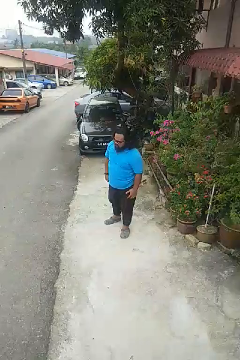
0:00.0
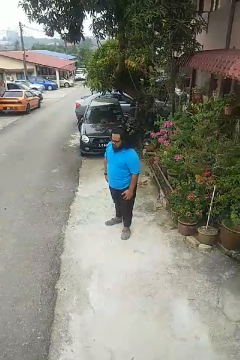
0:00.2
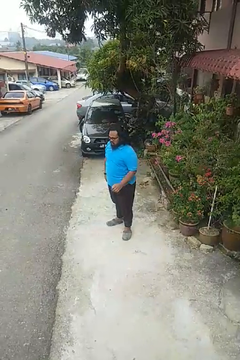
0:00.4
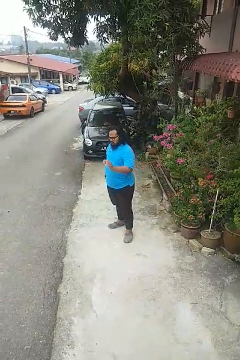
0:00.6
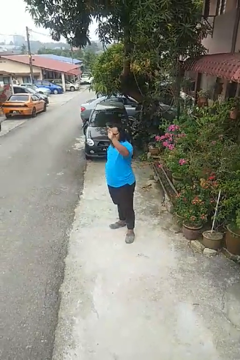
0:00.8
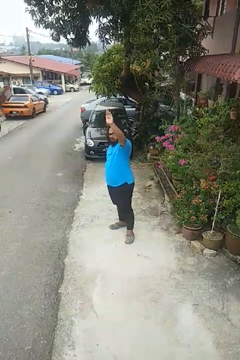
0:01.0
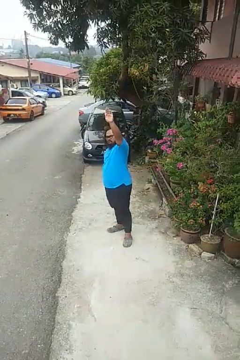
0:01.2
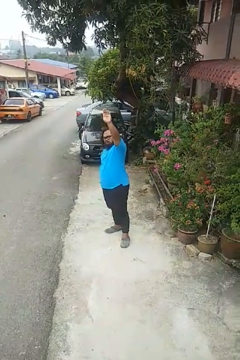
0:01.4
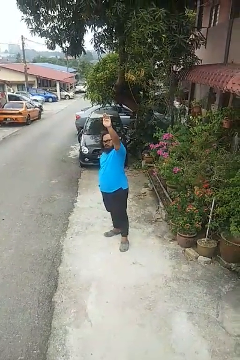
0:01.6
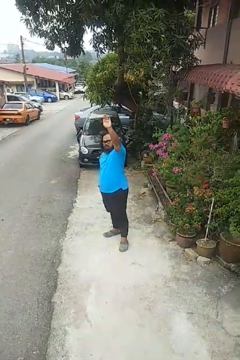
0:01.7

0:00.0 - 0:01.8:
person gestures raise hand

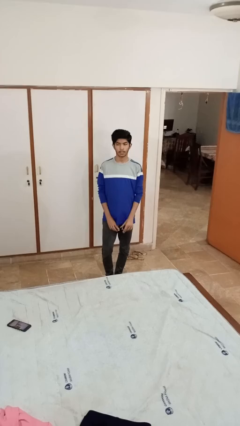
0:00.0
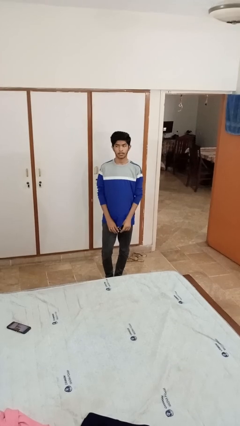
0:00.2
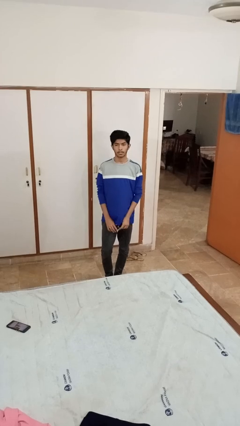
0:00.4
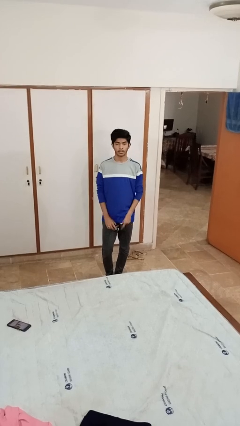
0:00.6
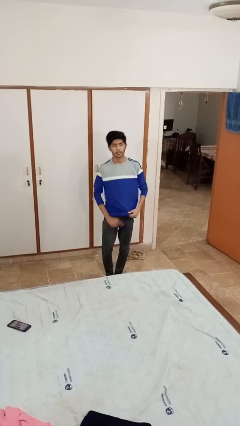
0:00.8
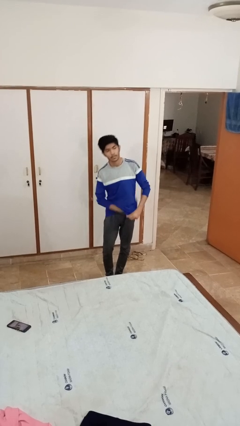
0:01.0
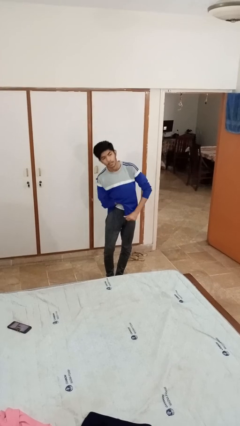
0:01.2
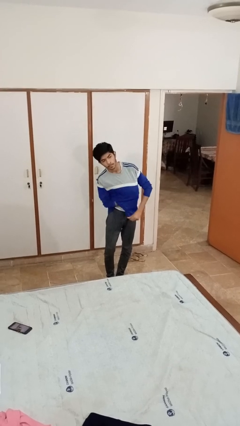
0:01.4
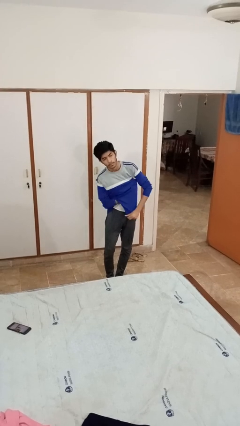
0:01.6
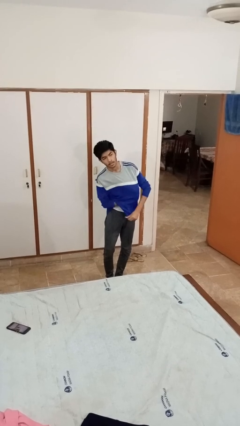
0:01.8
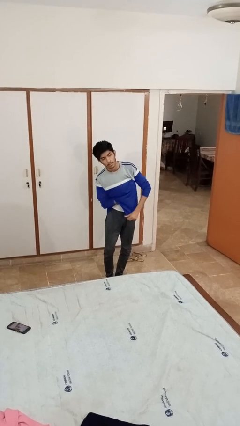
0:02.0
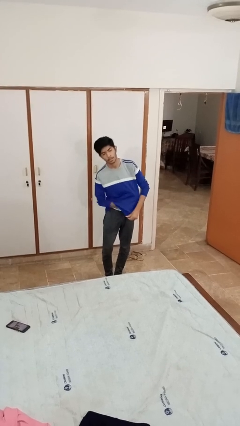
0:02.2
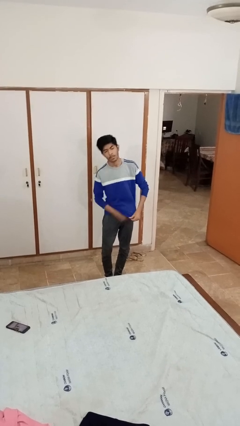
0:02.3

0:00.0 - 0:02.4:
person applies deodorant

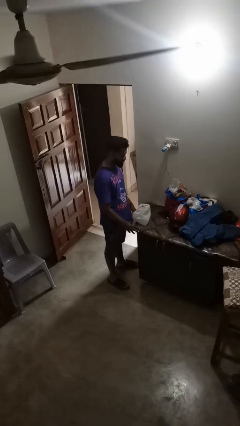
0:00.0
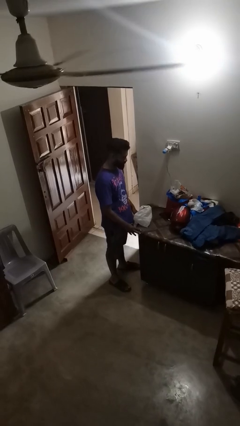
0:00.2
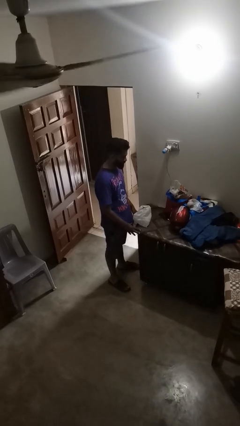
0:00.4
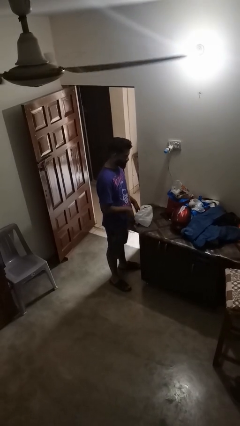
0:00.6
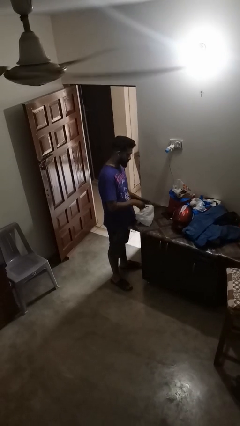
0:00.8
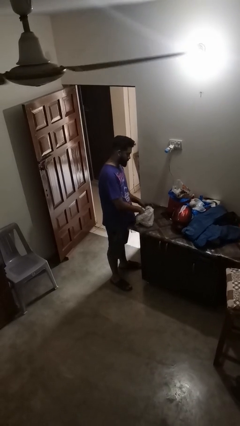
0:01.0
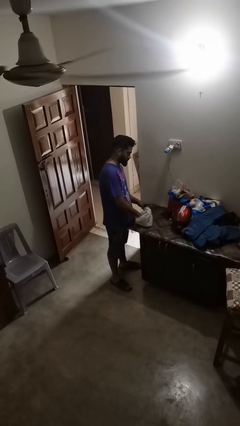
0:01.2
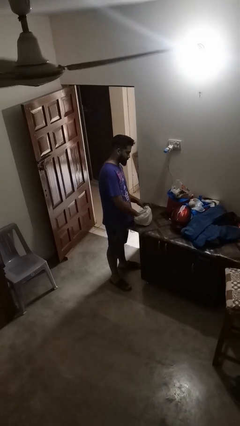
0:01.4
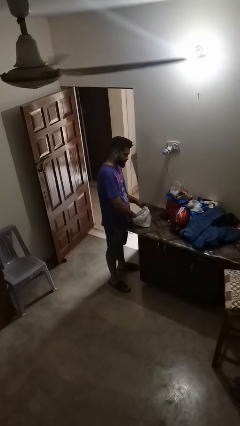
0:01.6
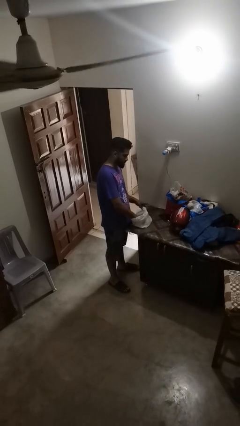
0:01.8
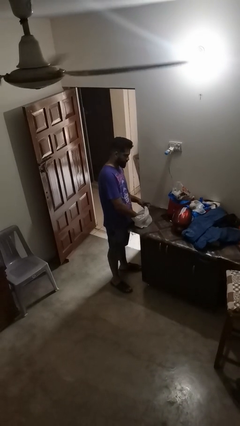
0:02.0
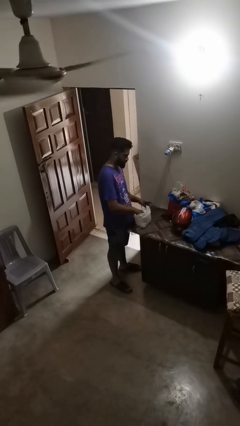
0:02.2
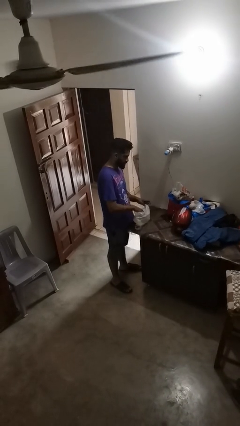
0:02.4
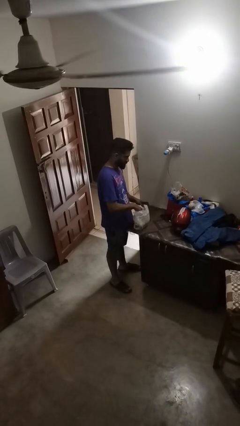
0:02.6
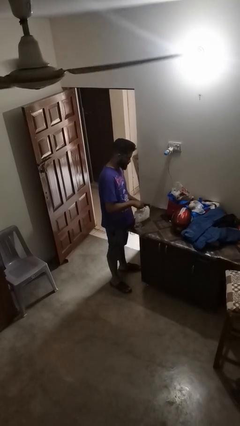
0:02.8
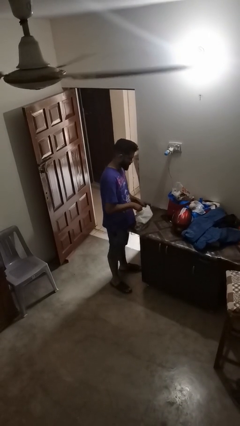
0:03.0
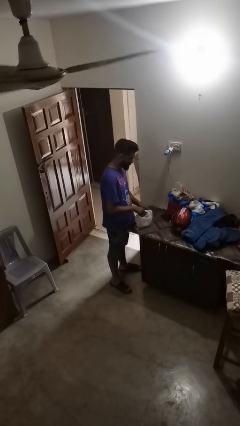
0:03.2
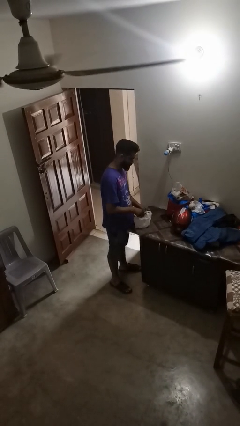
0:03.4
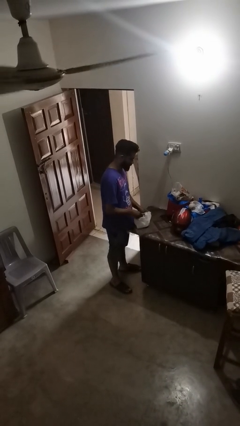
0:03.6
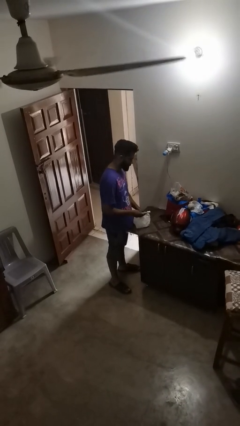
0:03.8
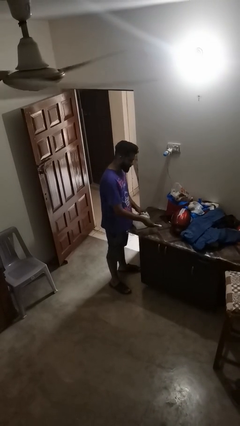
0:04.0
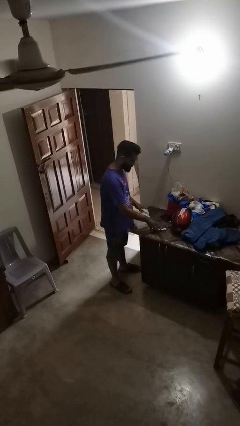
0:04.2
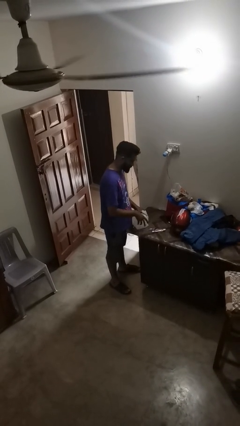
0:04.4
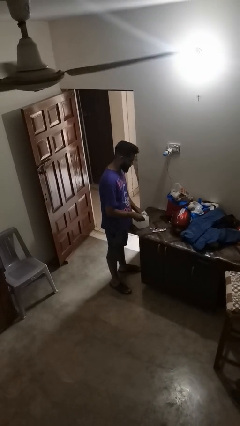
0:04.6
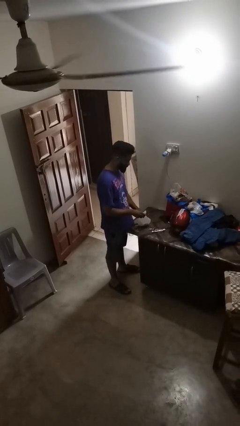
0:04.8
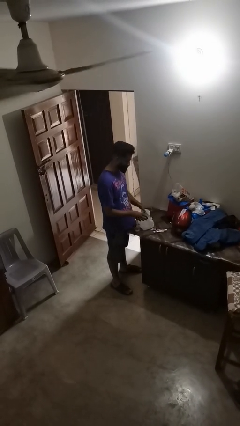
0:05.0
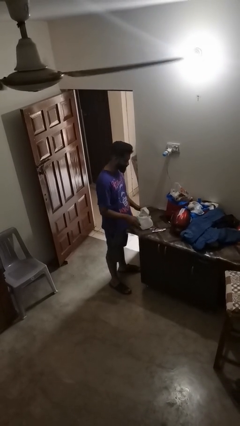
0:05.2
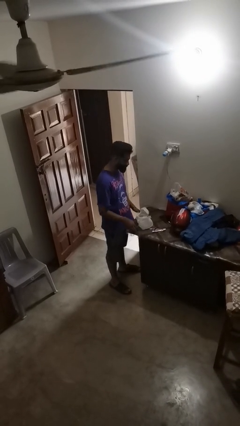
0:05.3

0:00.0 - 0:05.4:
person takes object from bag

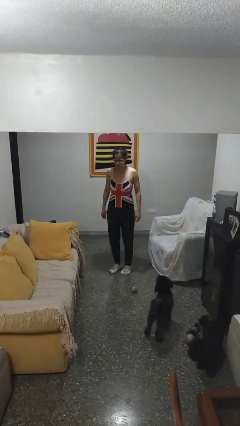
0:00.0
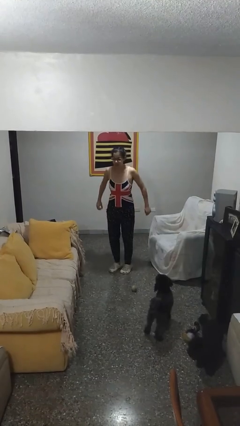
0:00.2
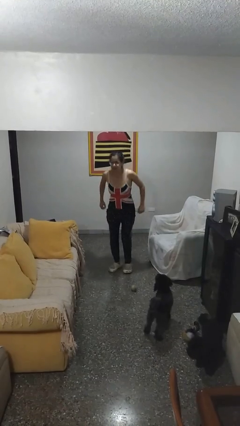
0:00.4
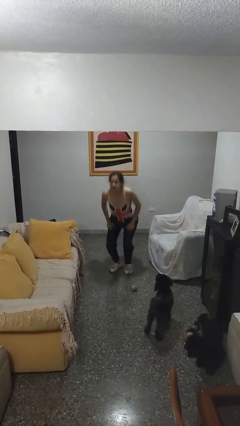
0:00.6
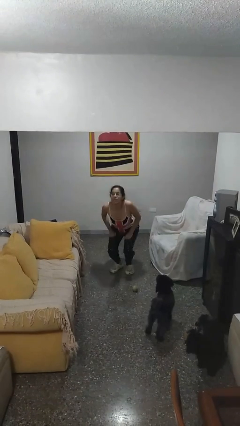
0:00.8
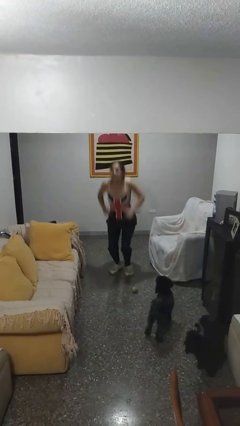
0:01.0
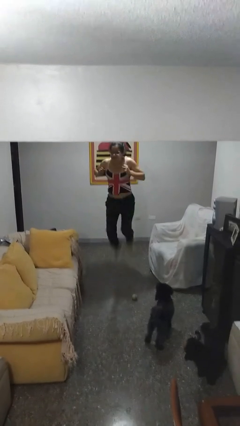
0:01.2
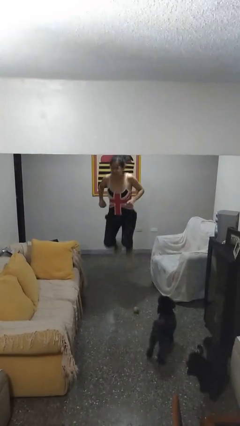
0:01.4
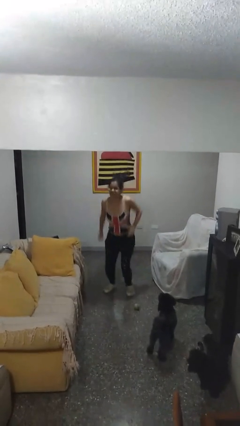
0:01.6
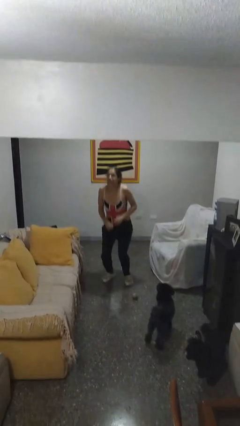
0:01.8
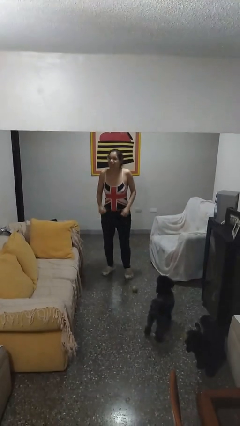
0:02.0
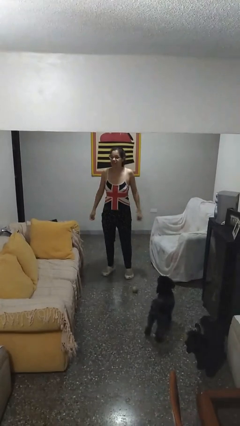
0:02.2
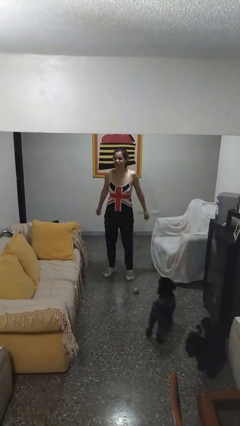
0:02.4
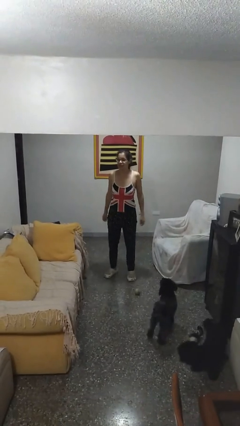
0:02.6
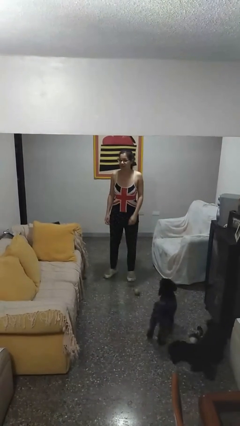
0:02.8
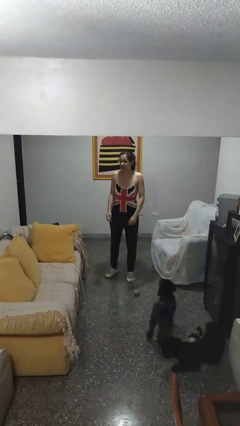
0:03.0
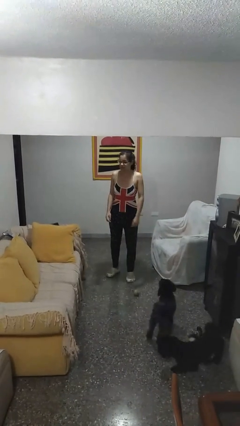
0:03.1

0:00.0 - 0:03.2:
person jumps

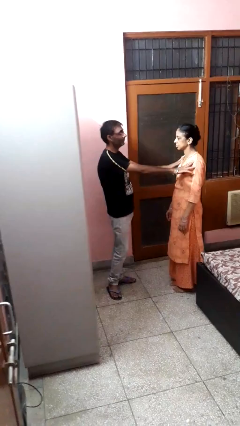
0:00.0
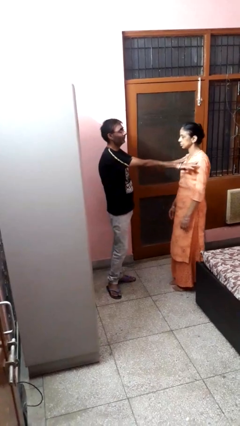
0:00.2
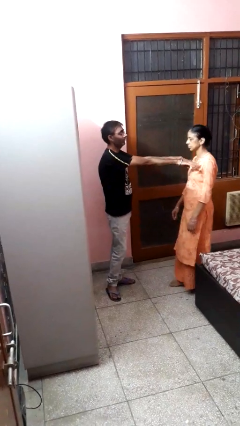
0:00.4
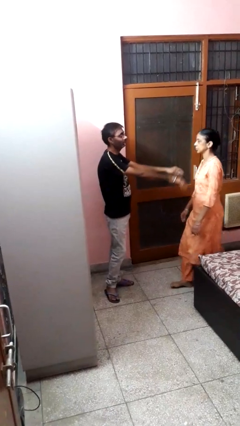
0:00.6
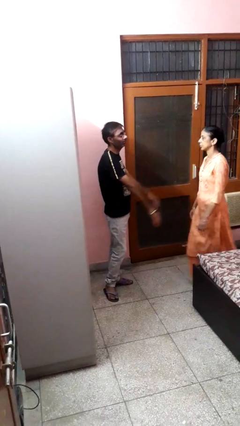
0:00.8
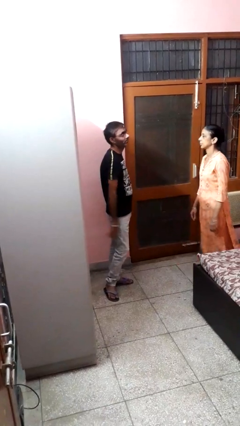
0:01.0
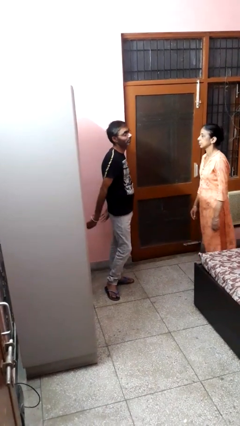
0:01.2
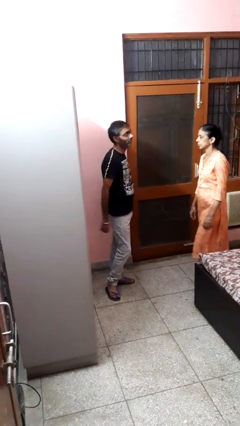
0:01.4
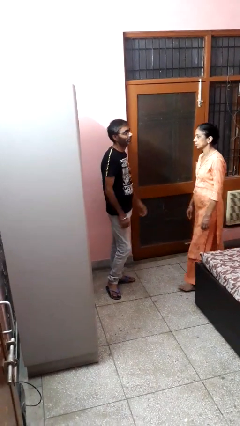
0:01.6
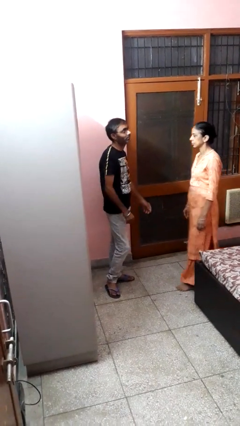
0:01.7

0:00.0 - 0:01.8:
person shoves person

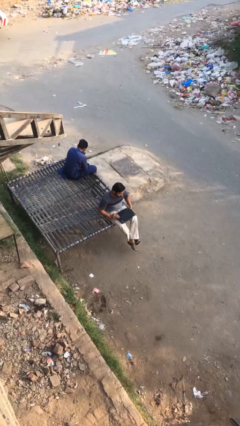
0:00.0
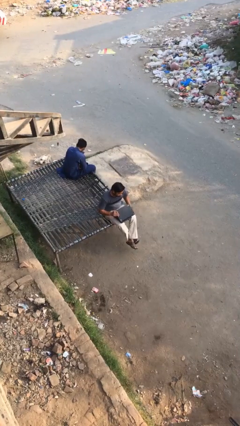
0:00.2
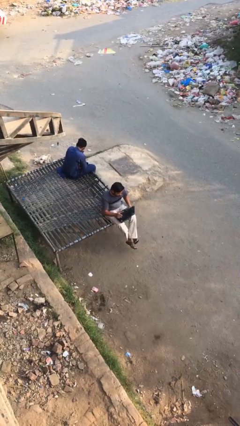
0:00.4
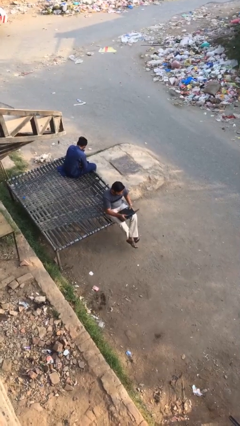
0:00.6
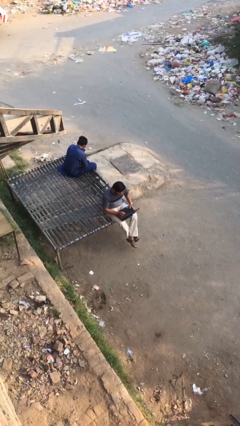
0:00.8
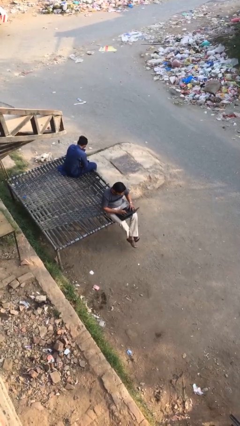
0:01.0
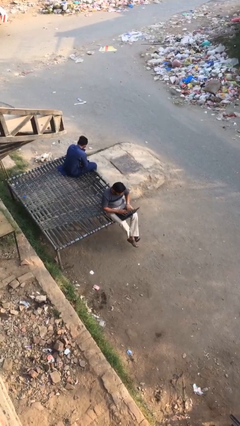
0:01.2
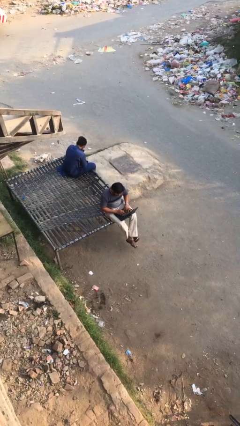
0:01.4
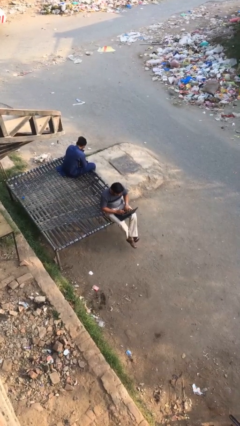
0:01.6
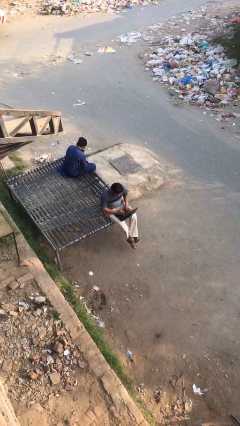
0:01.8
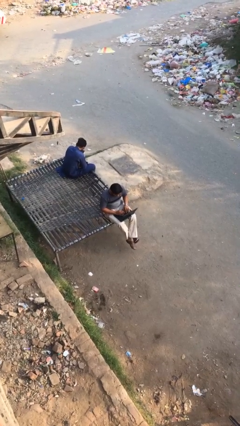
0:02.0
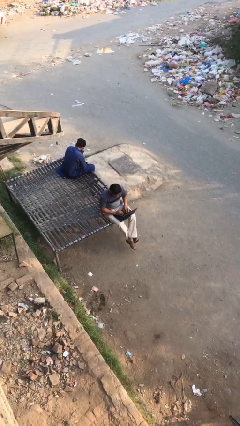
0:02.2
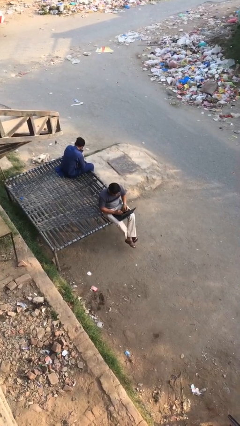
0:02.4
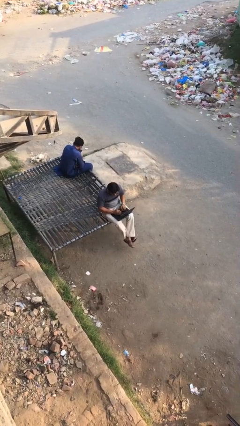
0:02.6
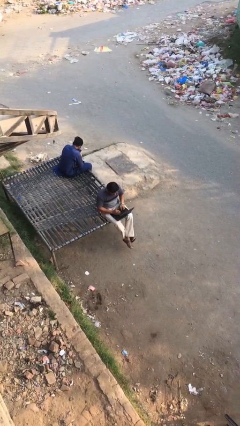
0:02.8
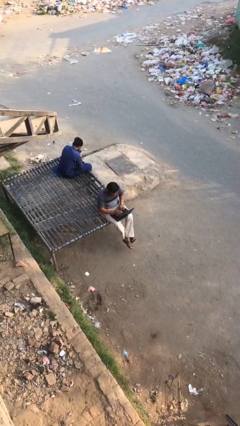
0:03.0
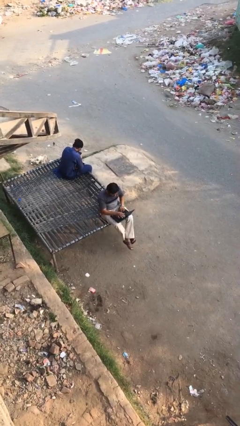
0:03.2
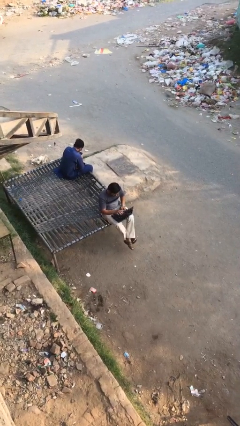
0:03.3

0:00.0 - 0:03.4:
person interacts with laptop
